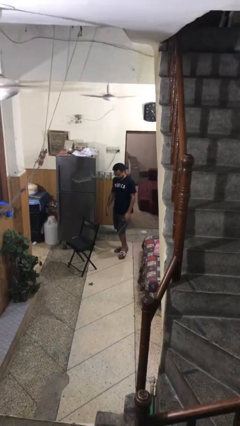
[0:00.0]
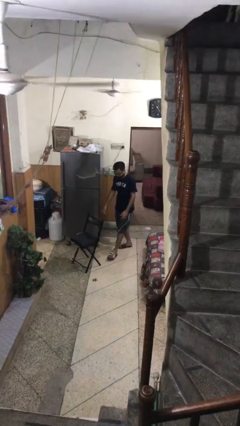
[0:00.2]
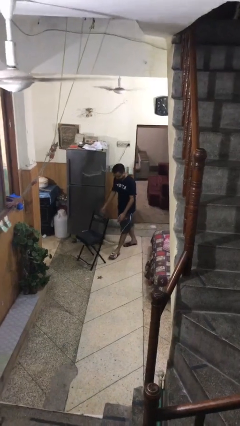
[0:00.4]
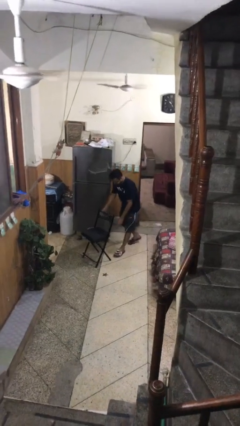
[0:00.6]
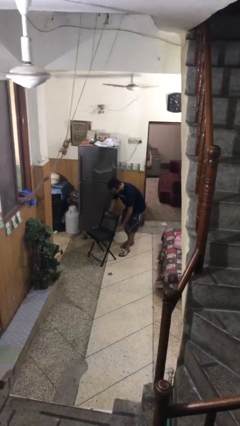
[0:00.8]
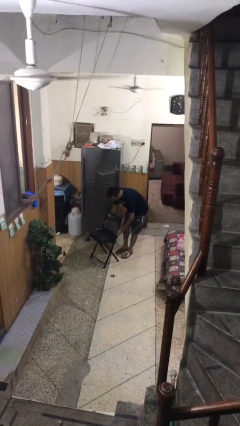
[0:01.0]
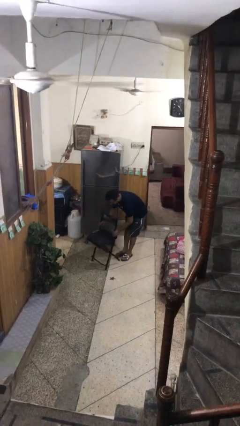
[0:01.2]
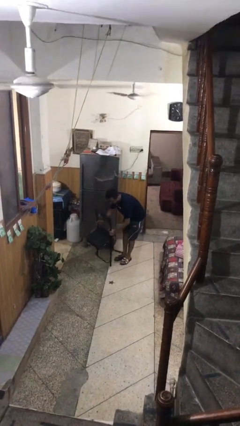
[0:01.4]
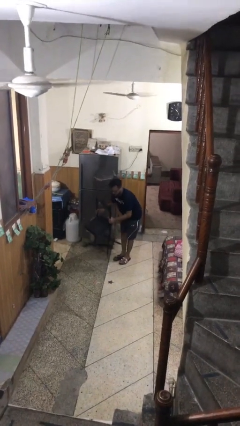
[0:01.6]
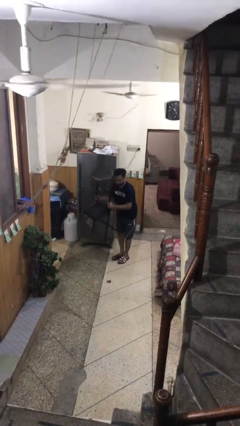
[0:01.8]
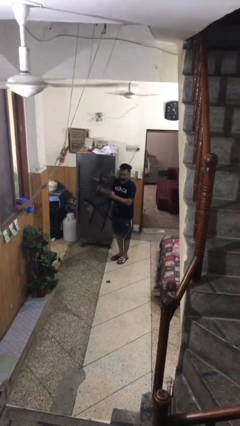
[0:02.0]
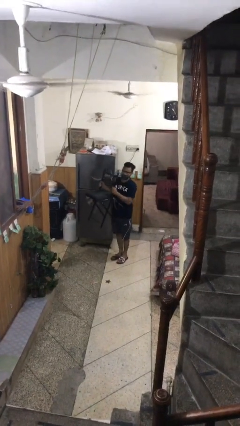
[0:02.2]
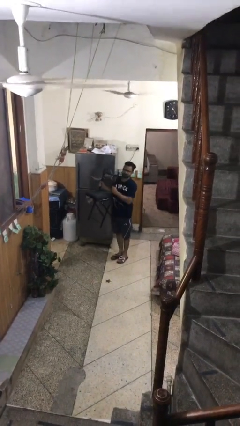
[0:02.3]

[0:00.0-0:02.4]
person picks up object from floor

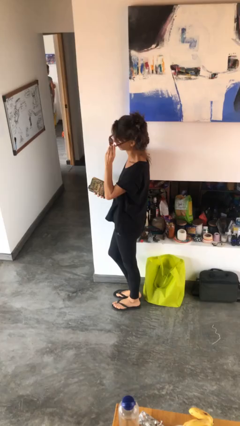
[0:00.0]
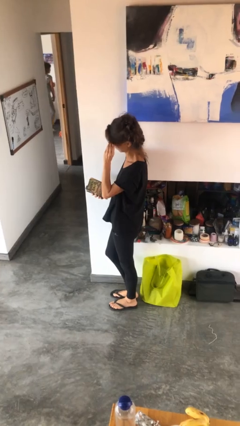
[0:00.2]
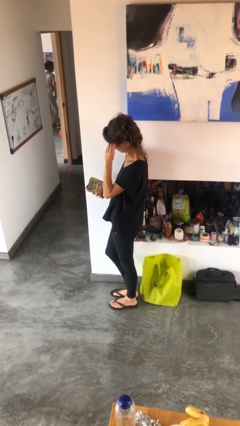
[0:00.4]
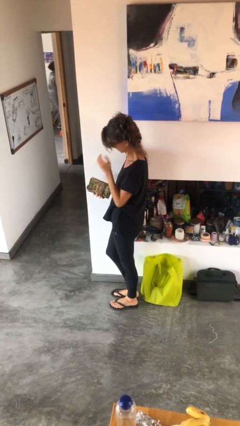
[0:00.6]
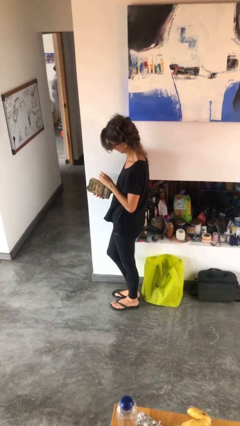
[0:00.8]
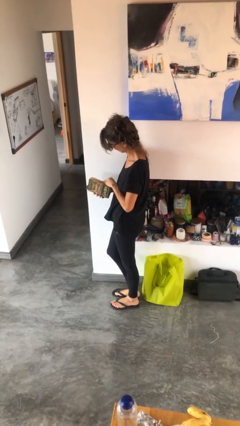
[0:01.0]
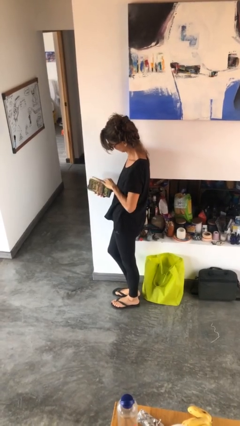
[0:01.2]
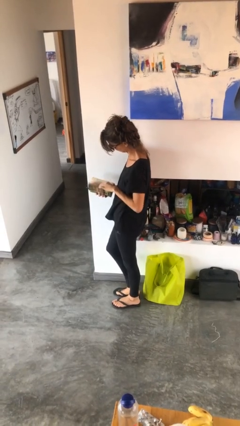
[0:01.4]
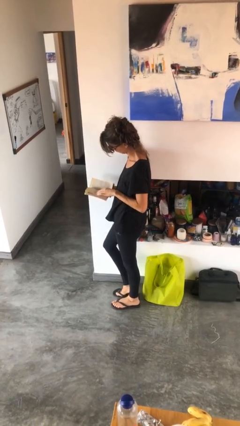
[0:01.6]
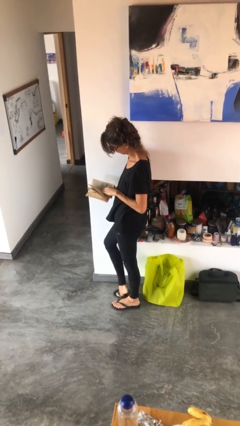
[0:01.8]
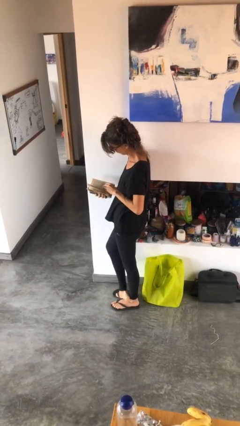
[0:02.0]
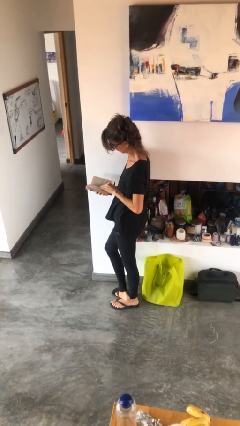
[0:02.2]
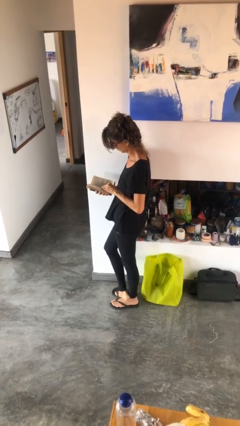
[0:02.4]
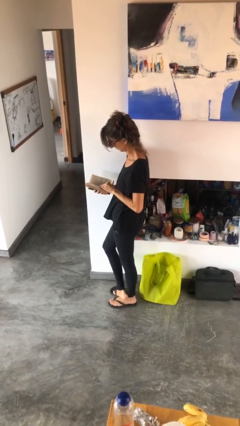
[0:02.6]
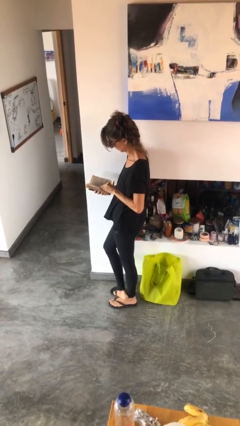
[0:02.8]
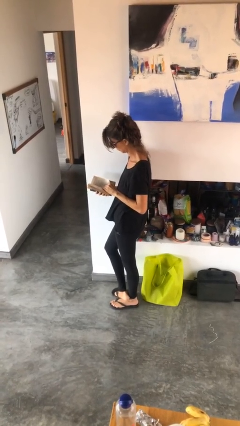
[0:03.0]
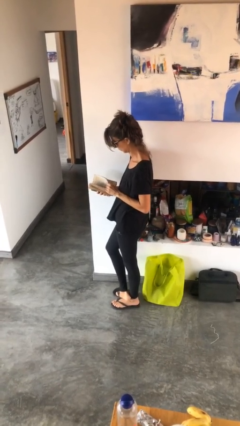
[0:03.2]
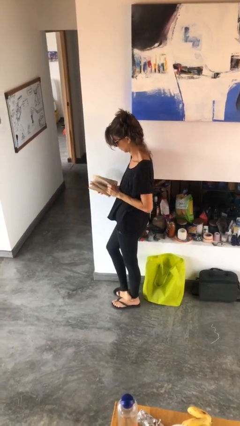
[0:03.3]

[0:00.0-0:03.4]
person reads book

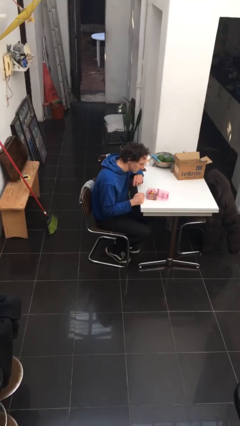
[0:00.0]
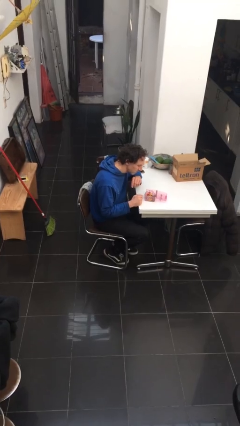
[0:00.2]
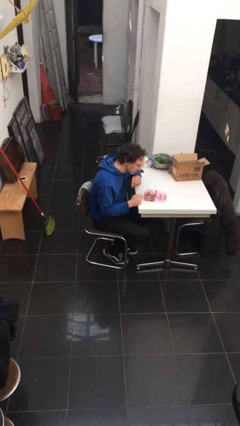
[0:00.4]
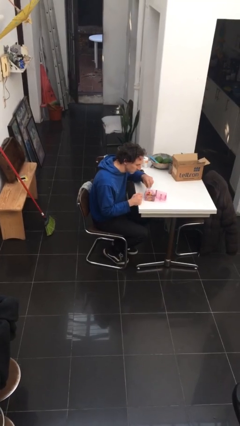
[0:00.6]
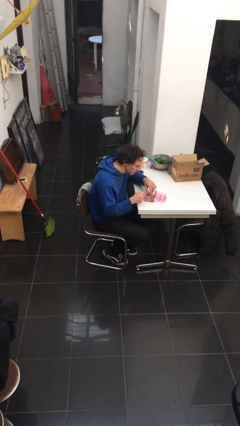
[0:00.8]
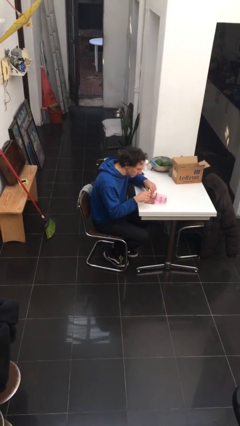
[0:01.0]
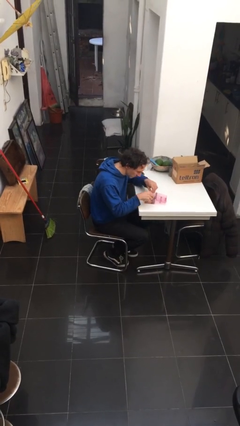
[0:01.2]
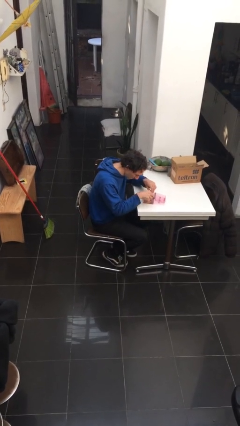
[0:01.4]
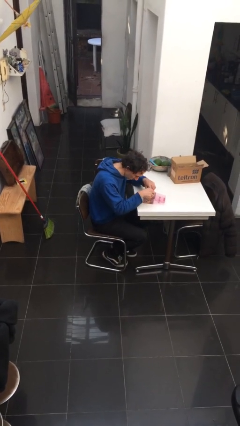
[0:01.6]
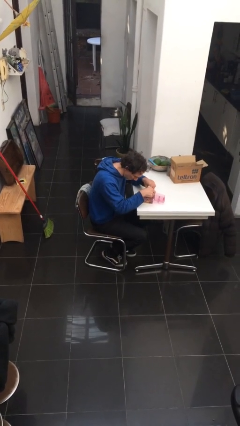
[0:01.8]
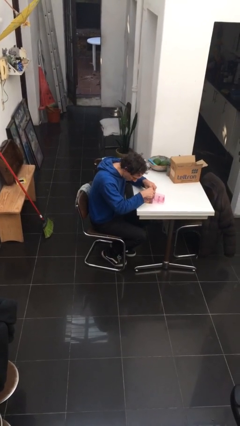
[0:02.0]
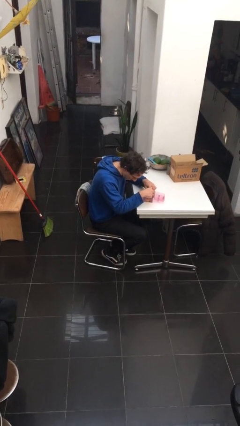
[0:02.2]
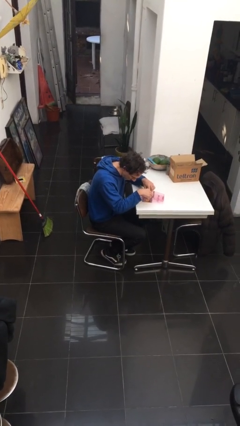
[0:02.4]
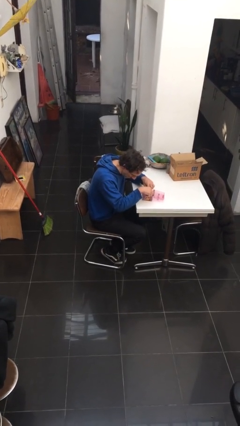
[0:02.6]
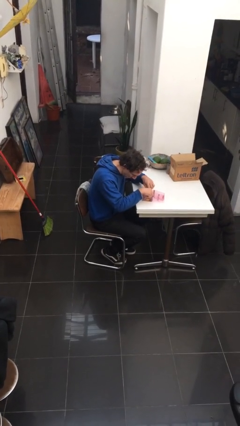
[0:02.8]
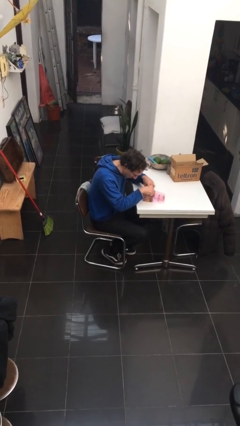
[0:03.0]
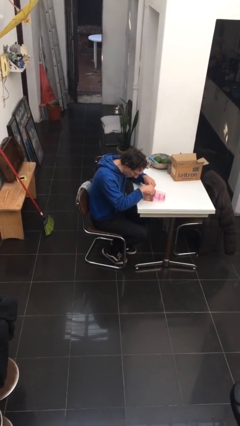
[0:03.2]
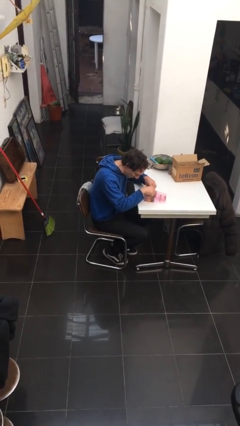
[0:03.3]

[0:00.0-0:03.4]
person searches jewelry box

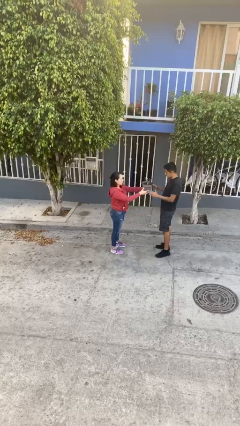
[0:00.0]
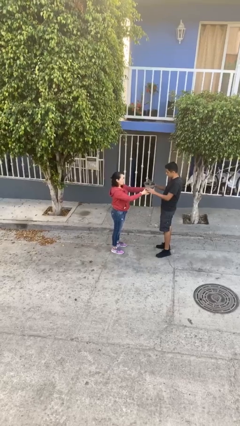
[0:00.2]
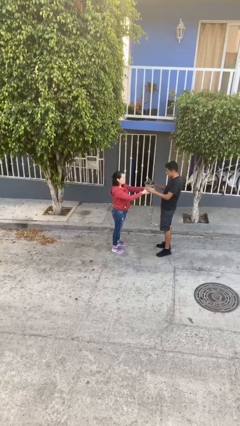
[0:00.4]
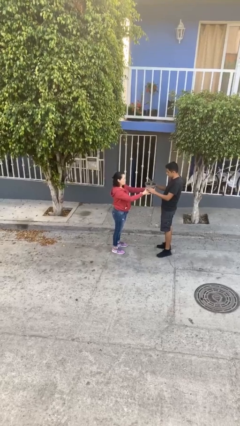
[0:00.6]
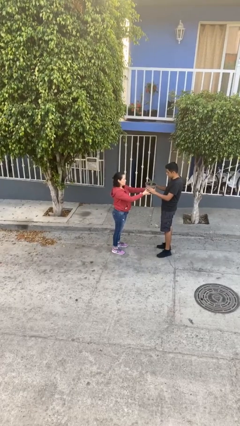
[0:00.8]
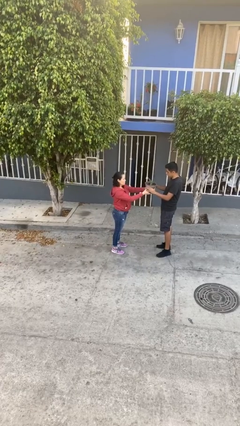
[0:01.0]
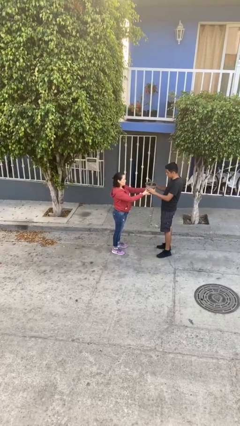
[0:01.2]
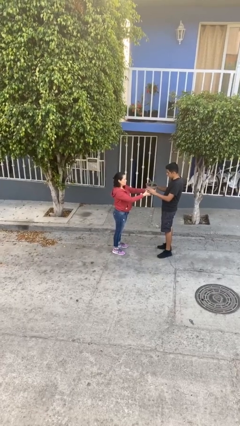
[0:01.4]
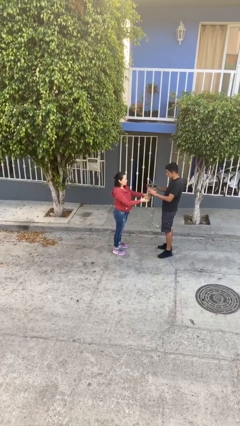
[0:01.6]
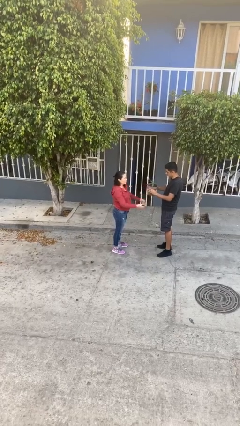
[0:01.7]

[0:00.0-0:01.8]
person transfers object to person

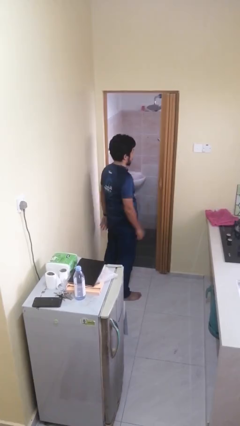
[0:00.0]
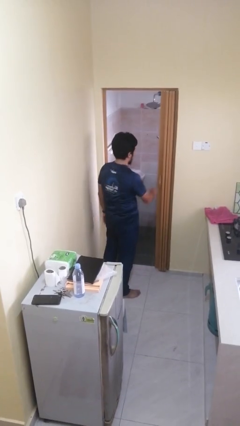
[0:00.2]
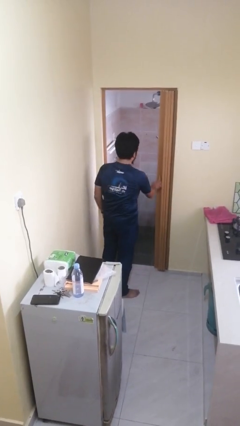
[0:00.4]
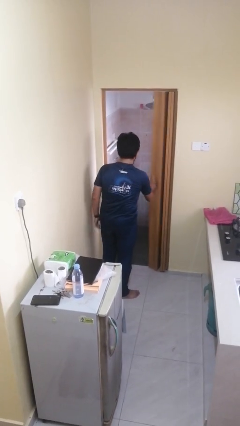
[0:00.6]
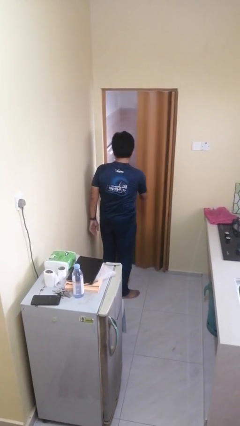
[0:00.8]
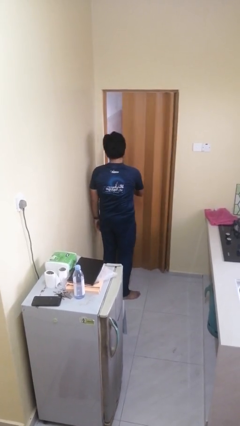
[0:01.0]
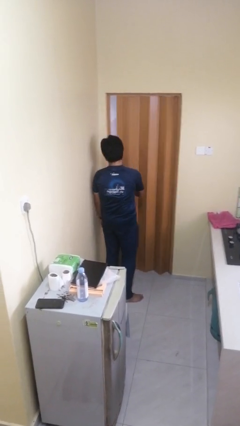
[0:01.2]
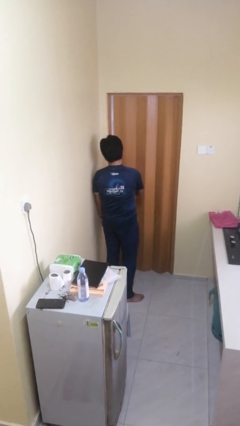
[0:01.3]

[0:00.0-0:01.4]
person closes sliding door

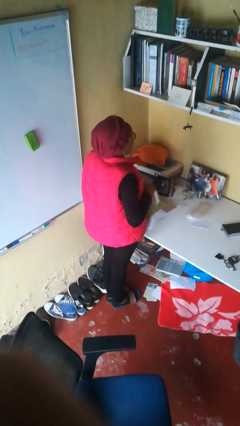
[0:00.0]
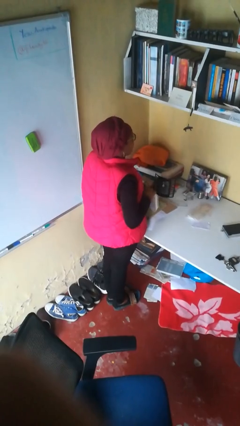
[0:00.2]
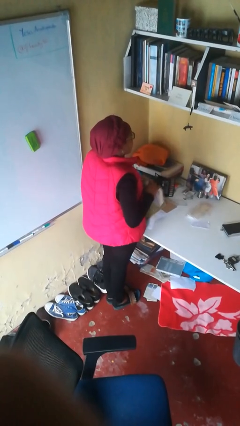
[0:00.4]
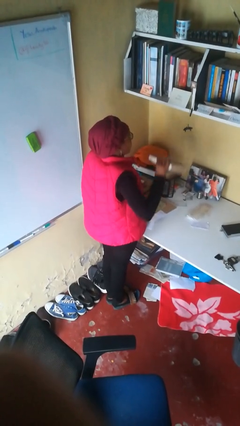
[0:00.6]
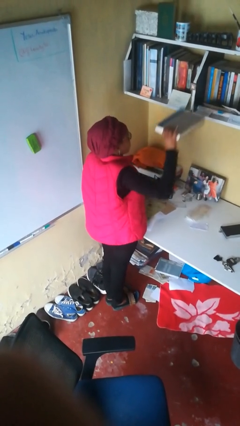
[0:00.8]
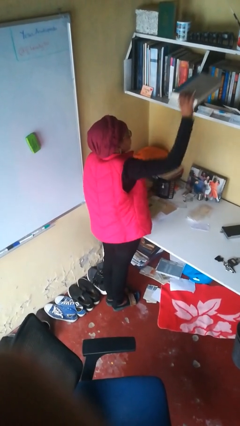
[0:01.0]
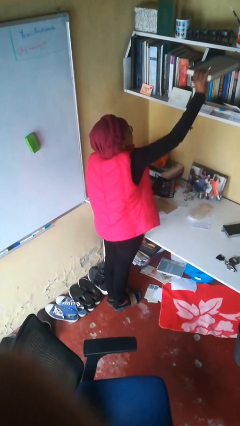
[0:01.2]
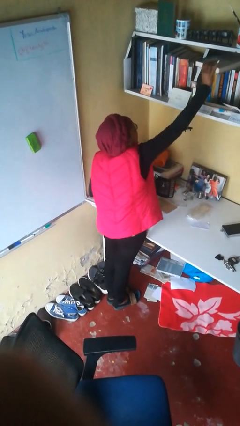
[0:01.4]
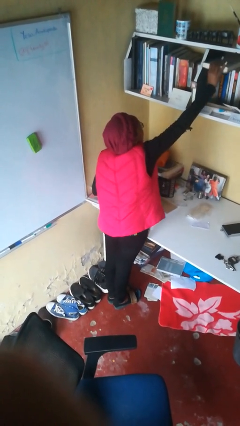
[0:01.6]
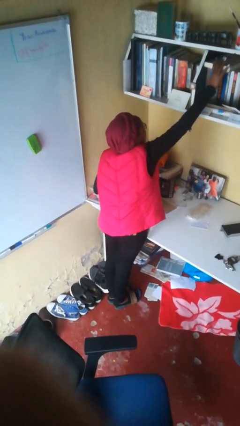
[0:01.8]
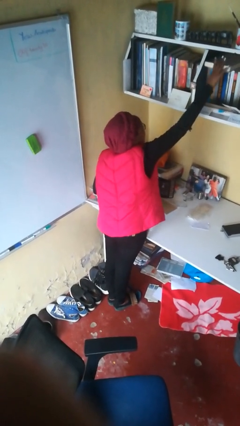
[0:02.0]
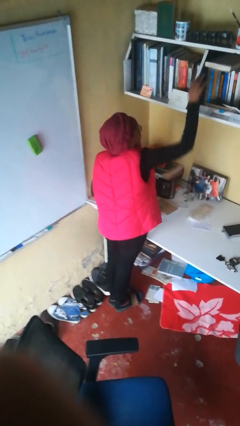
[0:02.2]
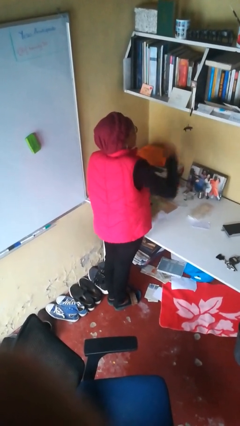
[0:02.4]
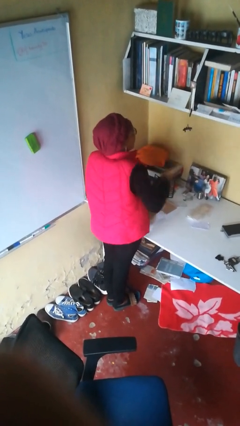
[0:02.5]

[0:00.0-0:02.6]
person puts down object on shelf

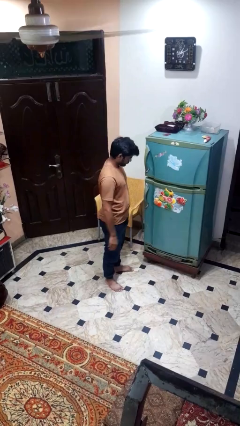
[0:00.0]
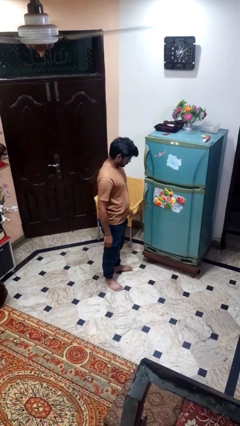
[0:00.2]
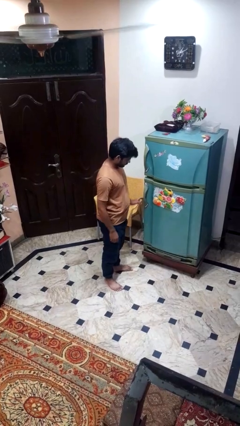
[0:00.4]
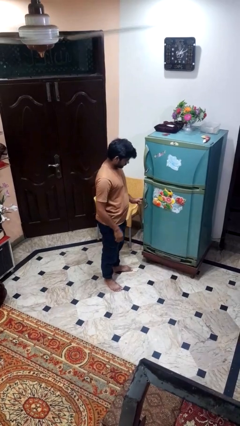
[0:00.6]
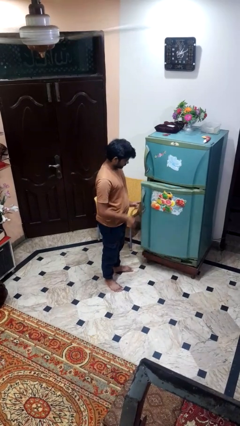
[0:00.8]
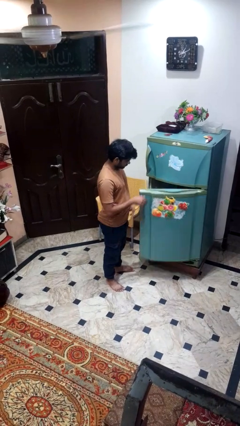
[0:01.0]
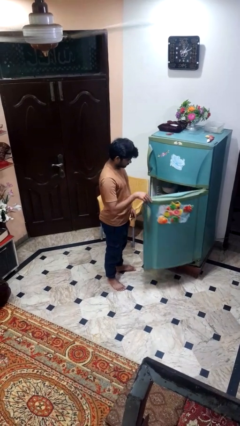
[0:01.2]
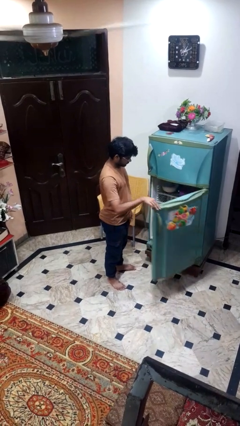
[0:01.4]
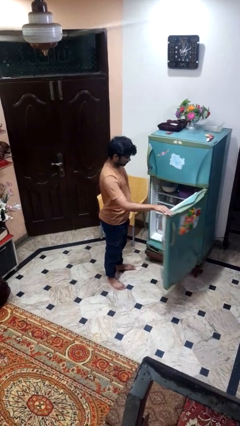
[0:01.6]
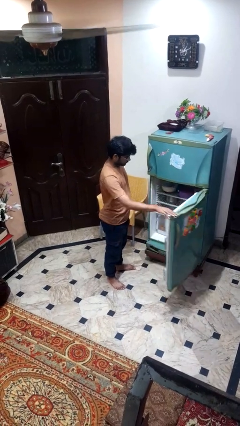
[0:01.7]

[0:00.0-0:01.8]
person opens refrigerator

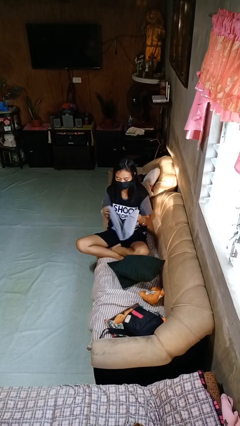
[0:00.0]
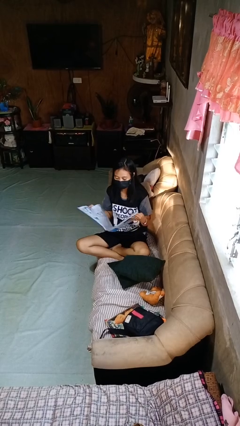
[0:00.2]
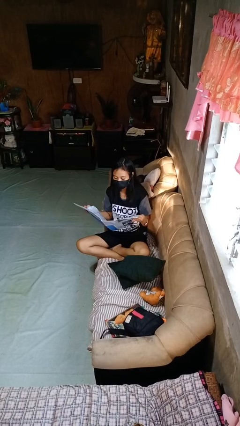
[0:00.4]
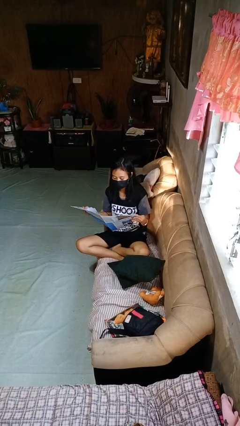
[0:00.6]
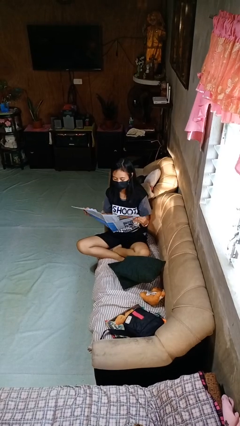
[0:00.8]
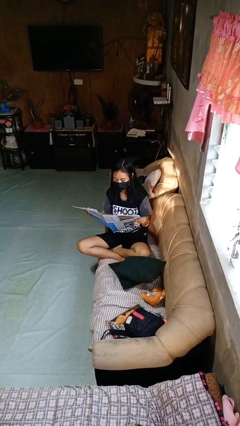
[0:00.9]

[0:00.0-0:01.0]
person reads newspaper
